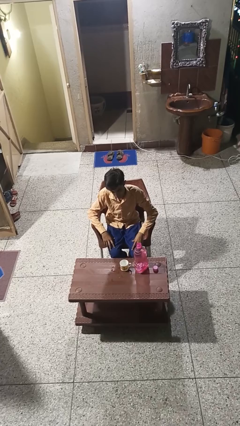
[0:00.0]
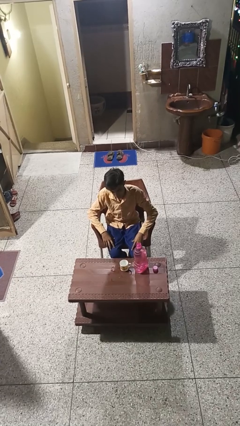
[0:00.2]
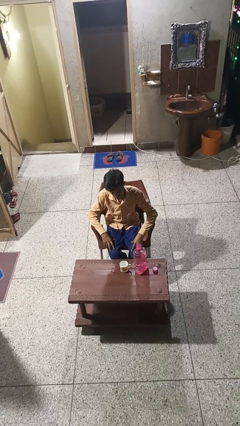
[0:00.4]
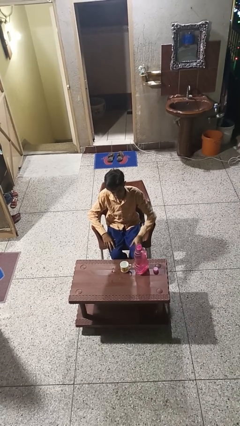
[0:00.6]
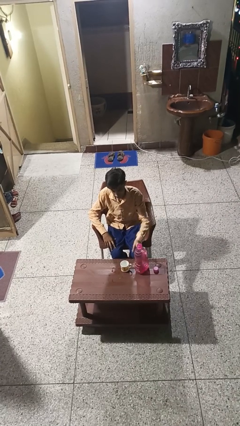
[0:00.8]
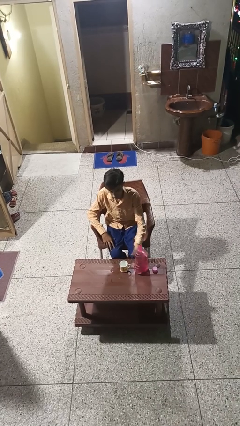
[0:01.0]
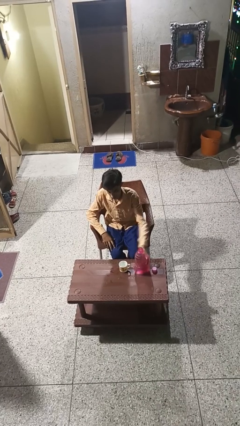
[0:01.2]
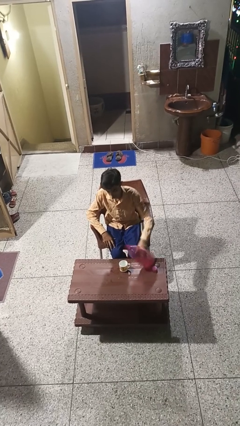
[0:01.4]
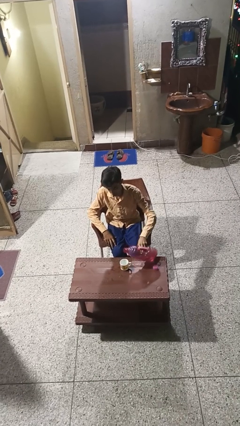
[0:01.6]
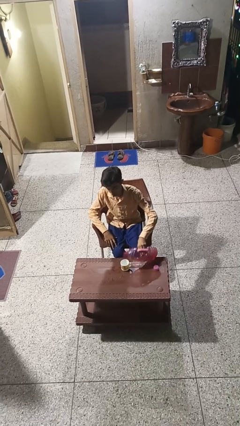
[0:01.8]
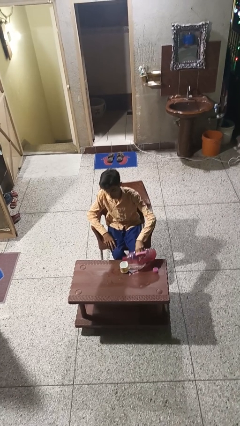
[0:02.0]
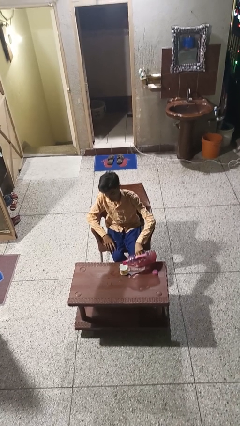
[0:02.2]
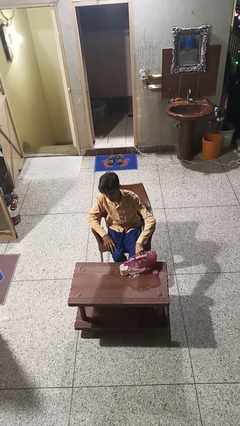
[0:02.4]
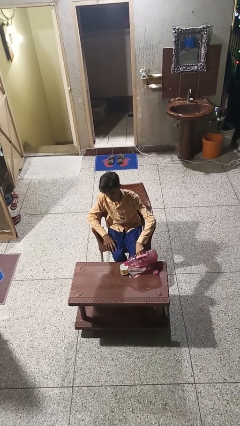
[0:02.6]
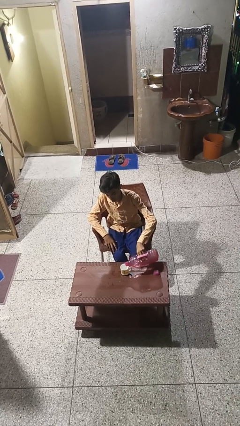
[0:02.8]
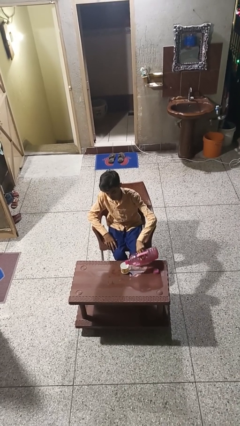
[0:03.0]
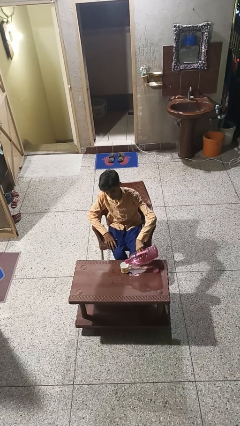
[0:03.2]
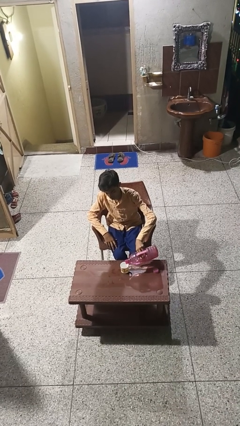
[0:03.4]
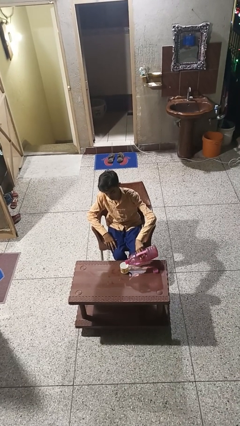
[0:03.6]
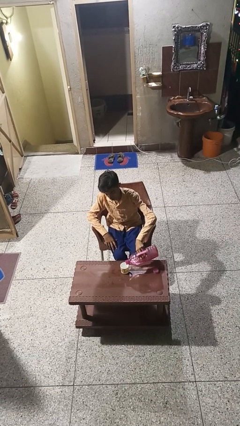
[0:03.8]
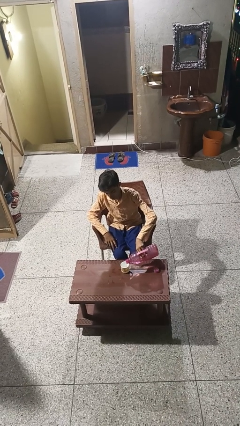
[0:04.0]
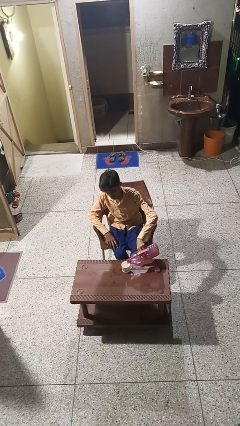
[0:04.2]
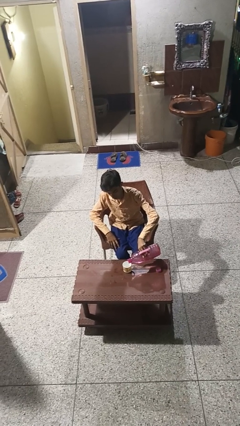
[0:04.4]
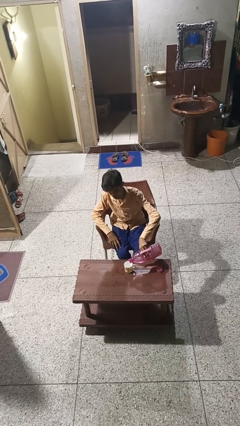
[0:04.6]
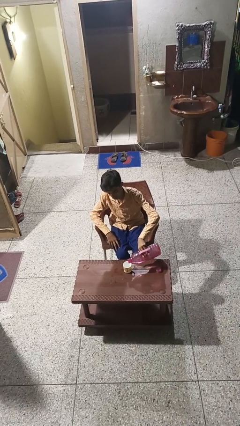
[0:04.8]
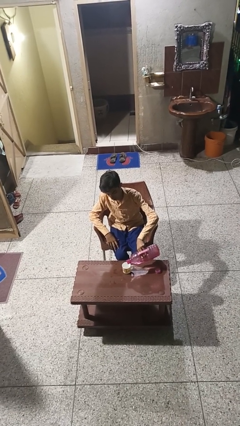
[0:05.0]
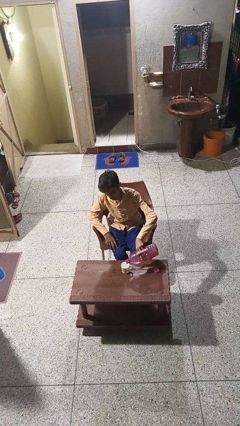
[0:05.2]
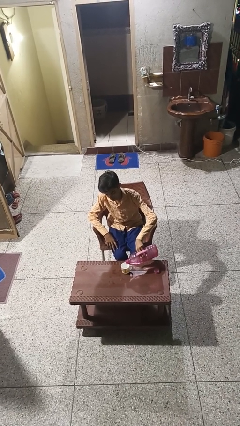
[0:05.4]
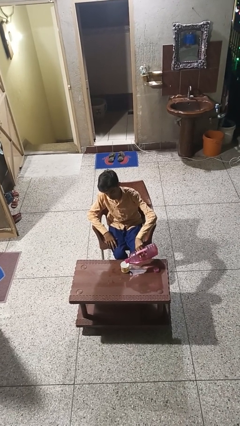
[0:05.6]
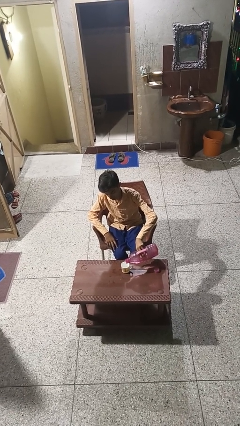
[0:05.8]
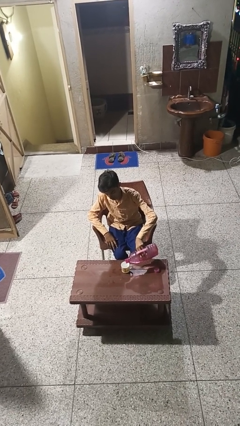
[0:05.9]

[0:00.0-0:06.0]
person pours liquid into cup

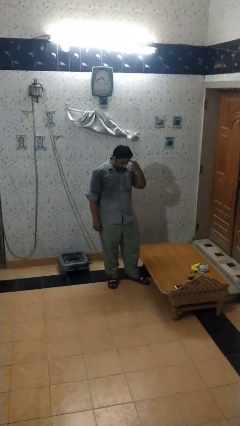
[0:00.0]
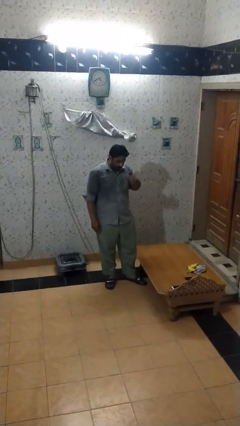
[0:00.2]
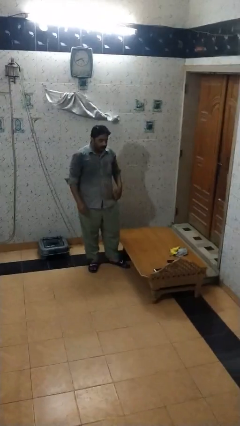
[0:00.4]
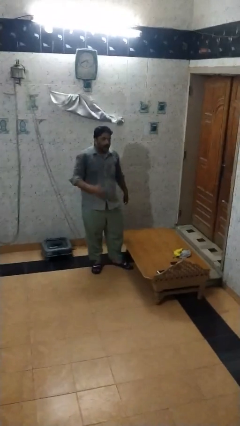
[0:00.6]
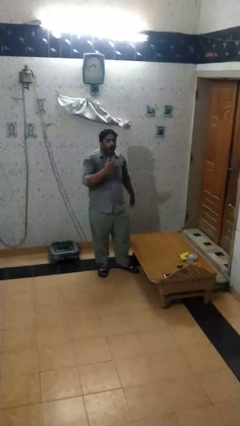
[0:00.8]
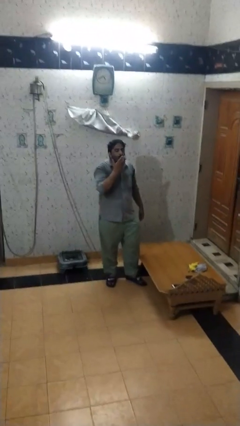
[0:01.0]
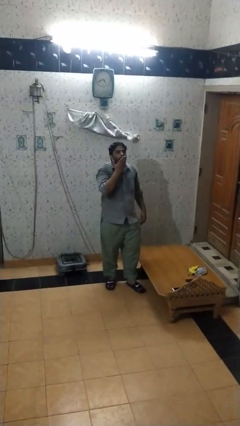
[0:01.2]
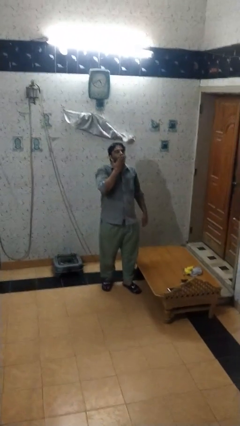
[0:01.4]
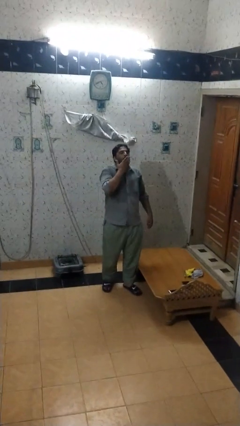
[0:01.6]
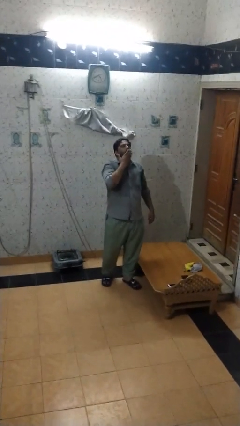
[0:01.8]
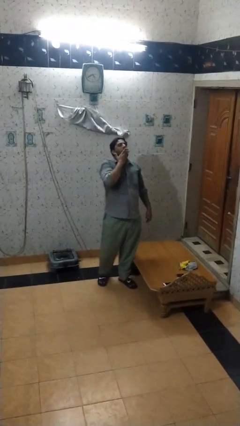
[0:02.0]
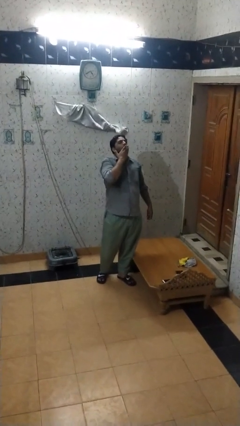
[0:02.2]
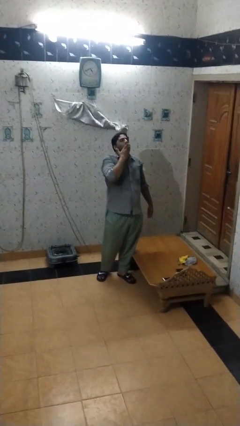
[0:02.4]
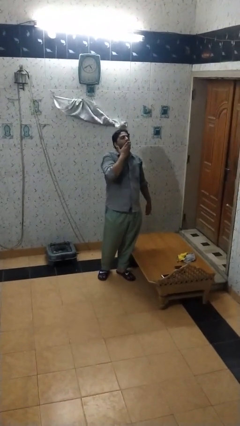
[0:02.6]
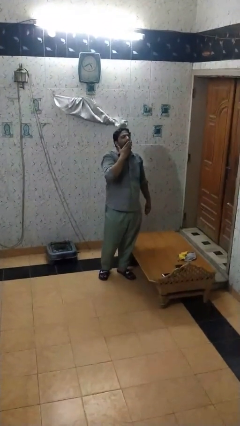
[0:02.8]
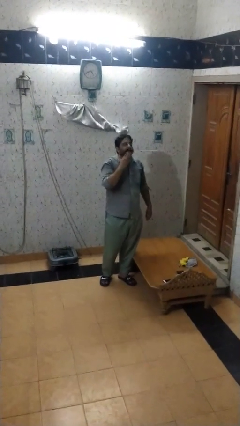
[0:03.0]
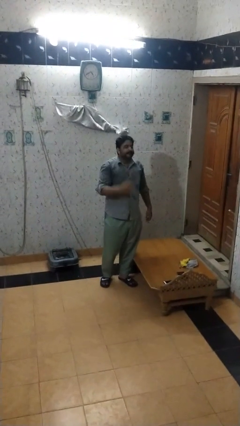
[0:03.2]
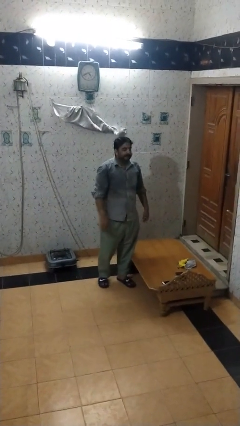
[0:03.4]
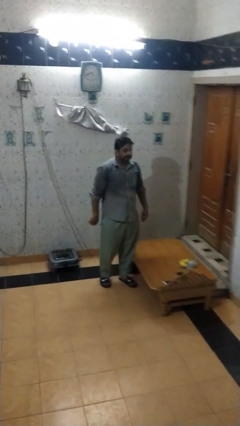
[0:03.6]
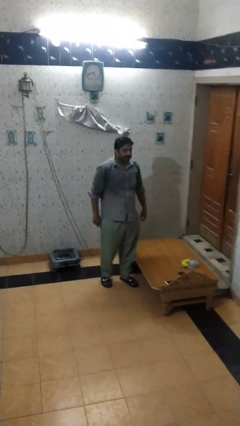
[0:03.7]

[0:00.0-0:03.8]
person yawns

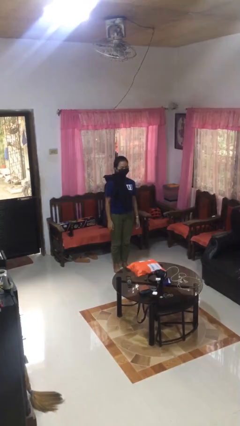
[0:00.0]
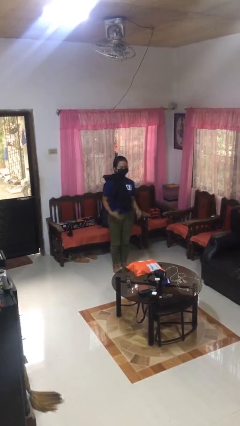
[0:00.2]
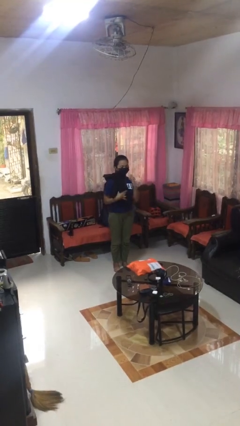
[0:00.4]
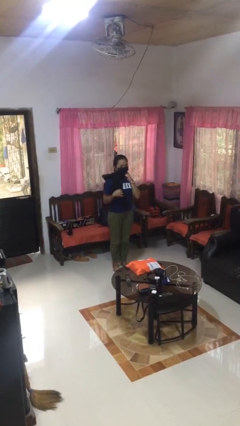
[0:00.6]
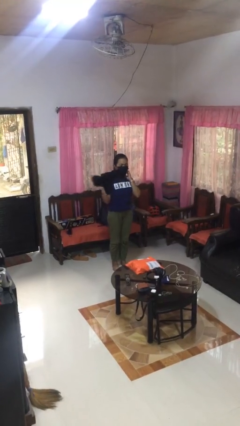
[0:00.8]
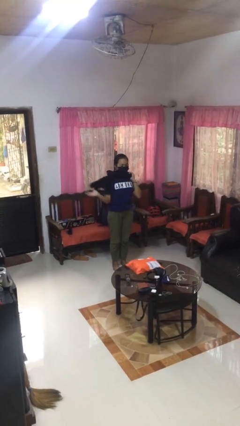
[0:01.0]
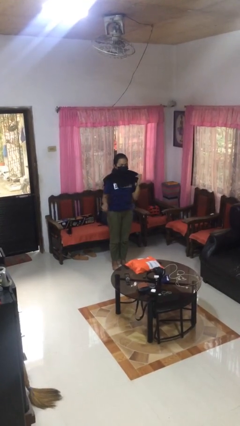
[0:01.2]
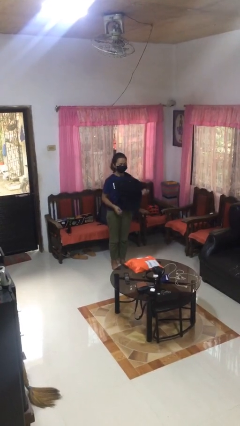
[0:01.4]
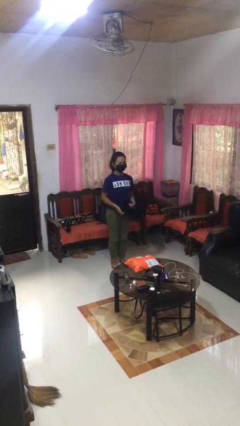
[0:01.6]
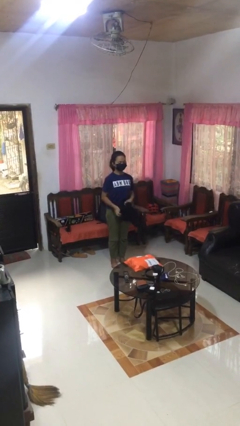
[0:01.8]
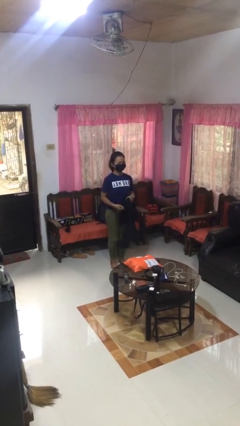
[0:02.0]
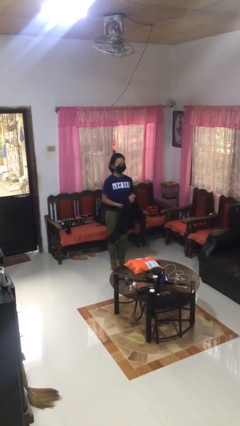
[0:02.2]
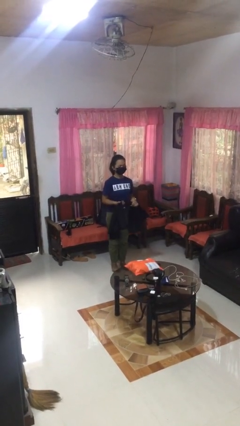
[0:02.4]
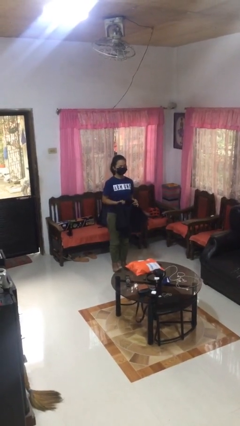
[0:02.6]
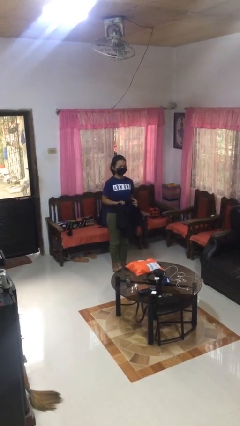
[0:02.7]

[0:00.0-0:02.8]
person takes off scarf

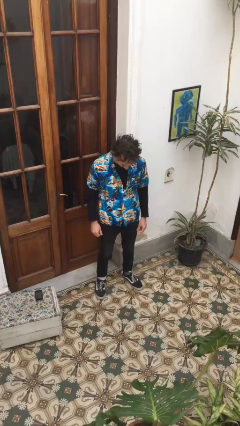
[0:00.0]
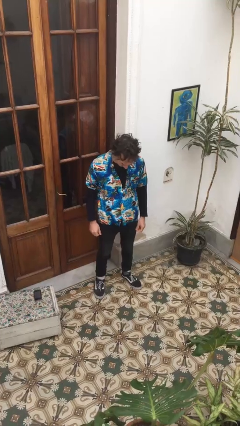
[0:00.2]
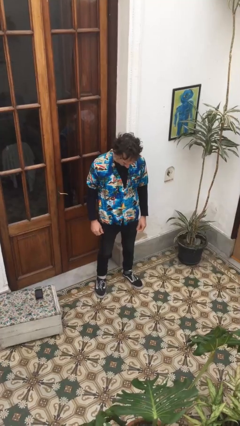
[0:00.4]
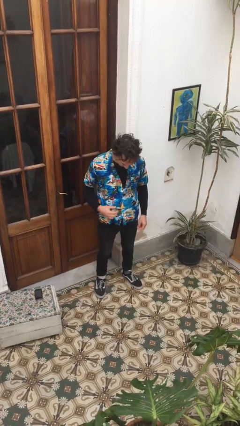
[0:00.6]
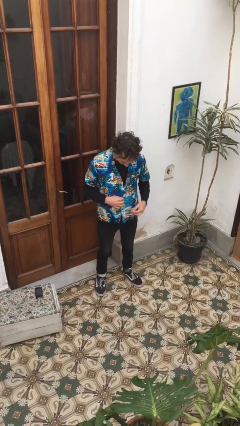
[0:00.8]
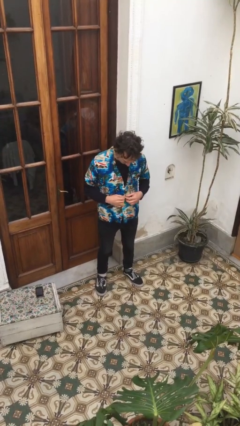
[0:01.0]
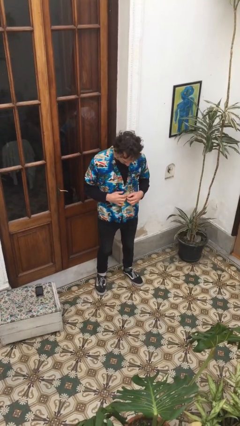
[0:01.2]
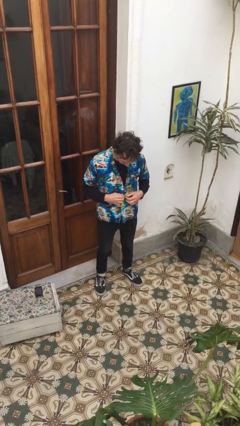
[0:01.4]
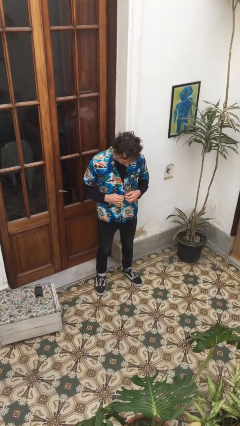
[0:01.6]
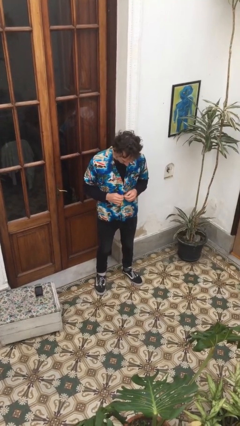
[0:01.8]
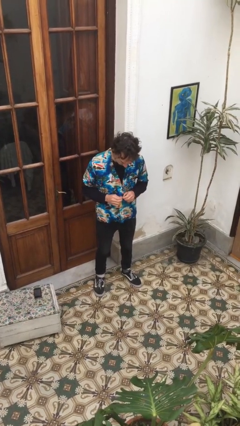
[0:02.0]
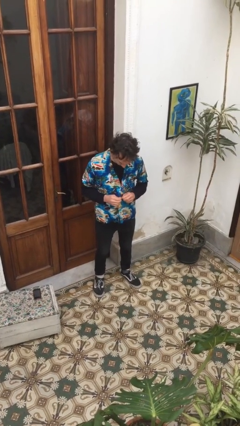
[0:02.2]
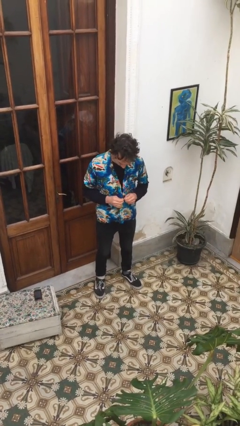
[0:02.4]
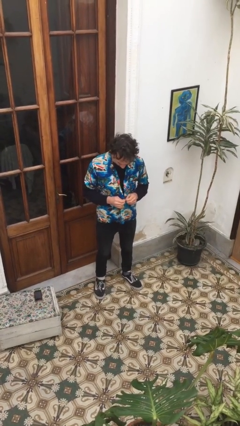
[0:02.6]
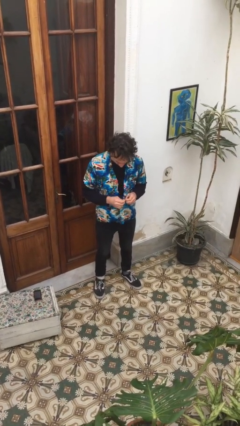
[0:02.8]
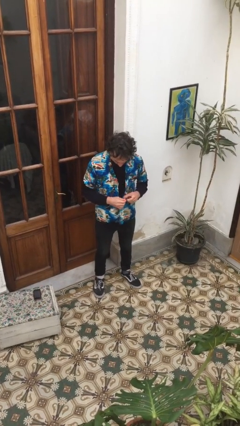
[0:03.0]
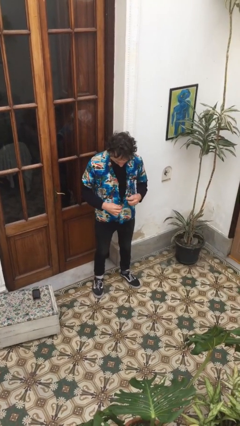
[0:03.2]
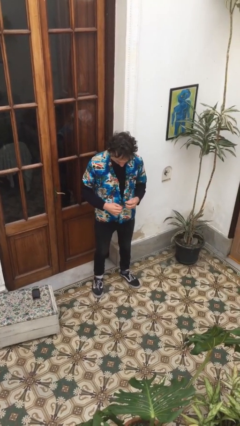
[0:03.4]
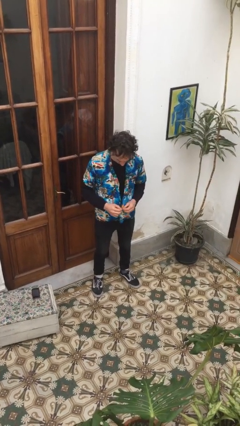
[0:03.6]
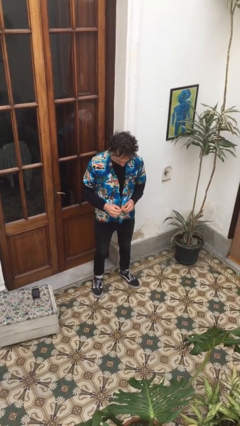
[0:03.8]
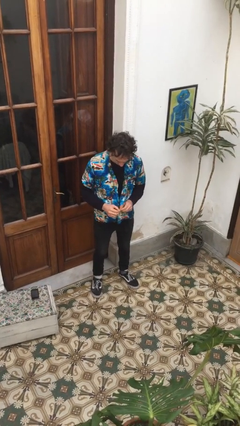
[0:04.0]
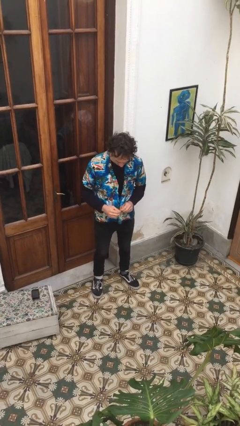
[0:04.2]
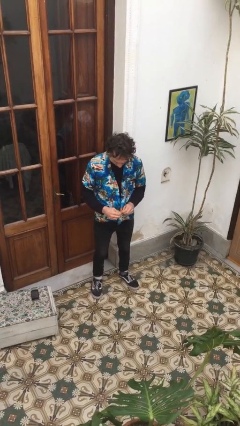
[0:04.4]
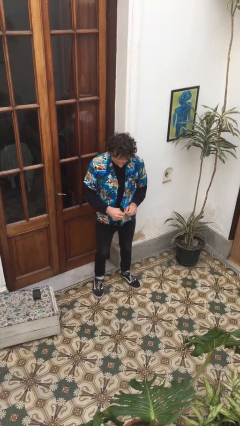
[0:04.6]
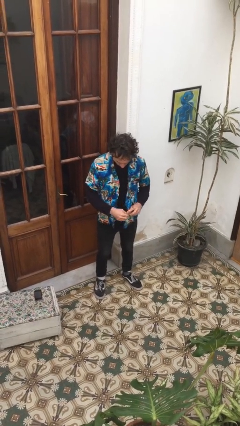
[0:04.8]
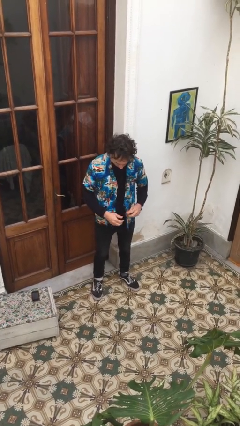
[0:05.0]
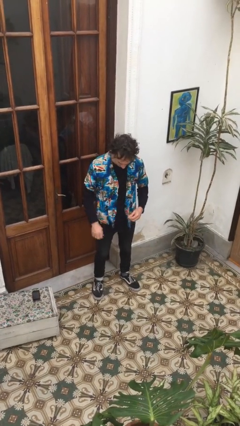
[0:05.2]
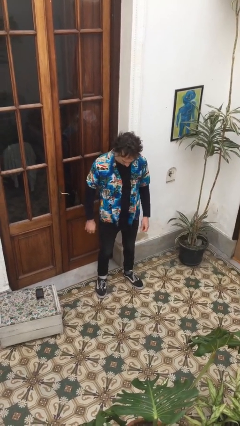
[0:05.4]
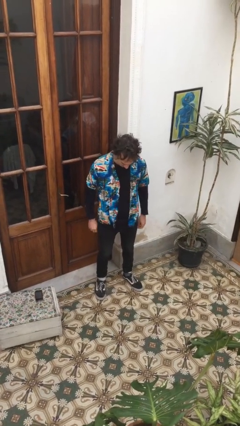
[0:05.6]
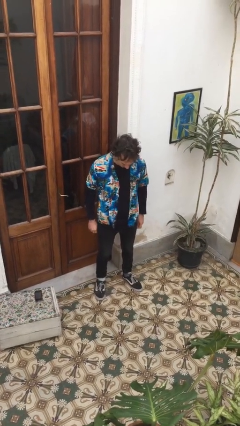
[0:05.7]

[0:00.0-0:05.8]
person unbuttons shirt
